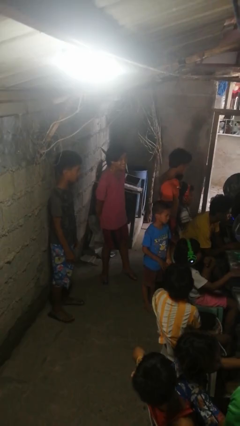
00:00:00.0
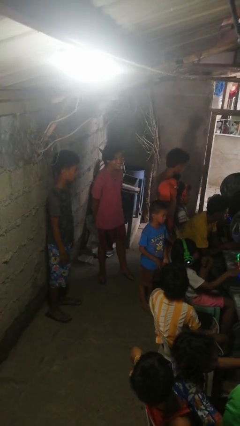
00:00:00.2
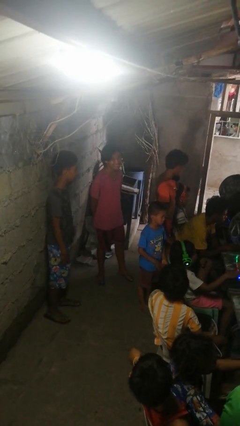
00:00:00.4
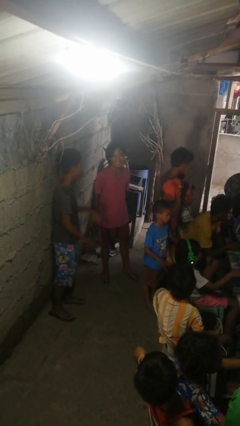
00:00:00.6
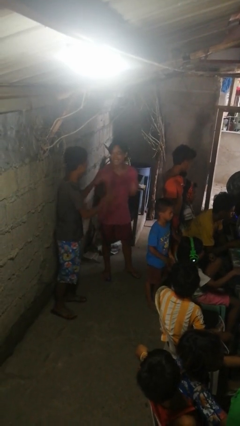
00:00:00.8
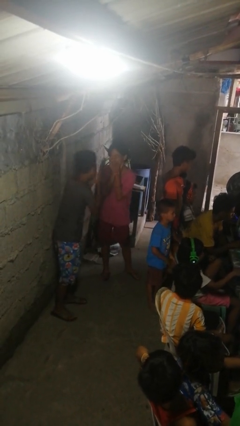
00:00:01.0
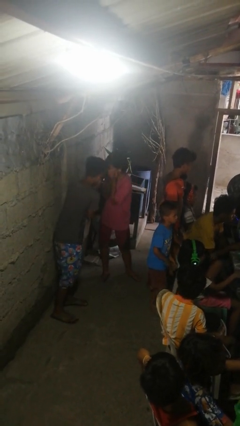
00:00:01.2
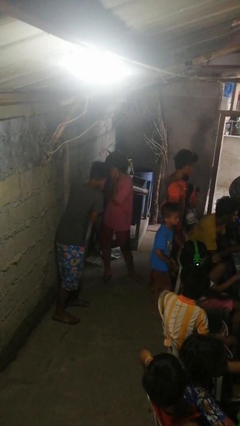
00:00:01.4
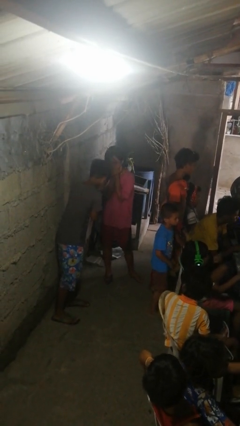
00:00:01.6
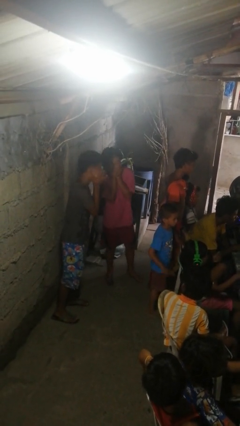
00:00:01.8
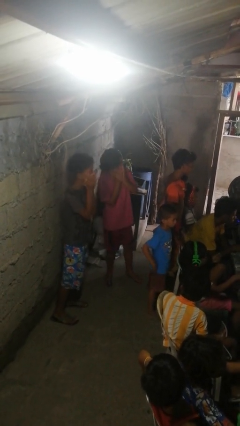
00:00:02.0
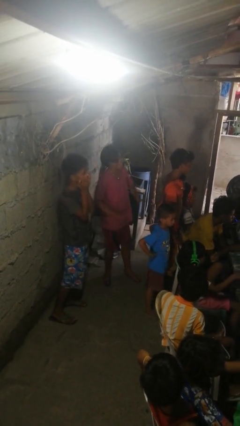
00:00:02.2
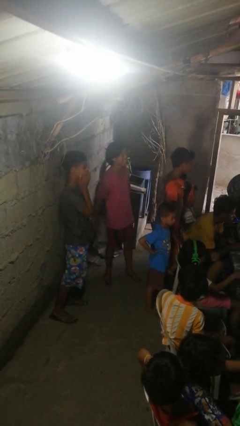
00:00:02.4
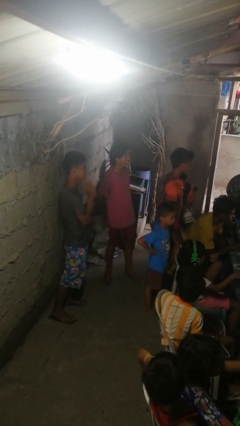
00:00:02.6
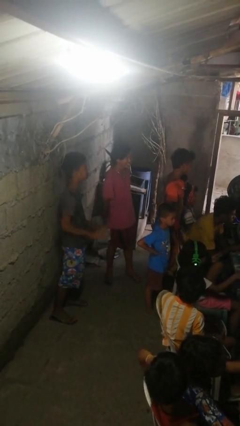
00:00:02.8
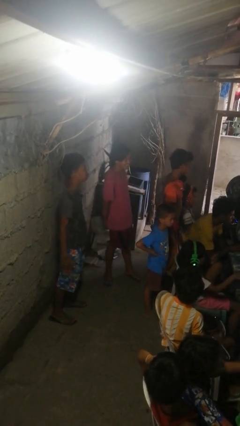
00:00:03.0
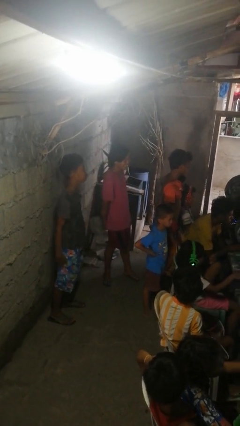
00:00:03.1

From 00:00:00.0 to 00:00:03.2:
person laughs with person

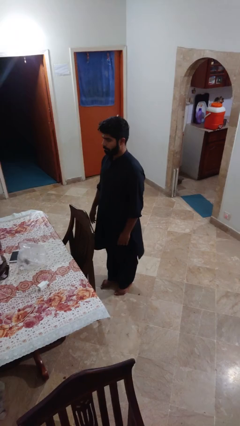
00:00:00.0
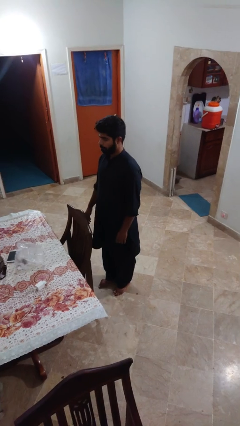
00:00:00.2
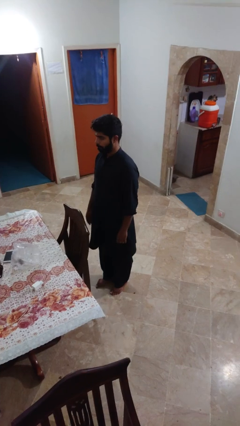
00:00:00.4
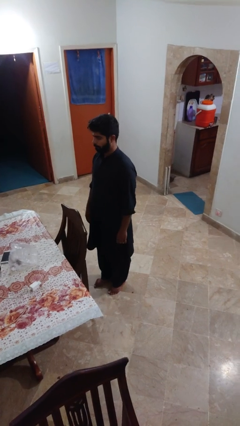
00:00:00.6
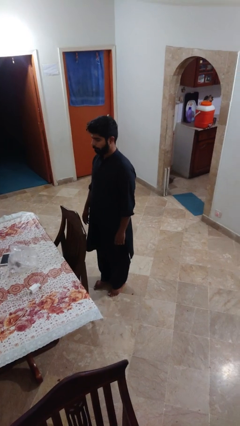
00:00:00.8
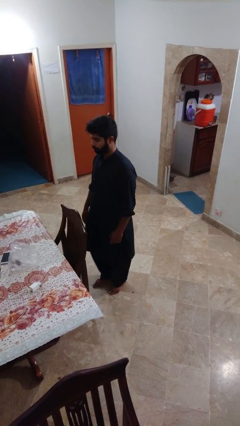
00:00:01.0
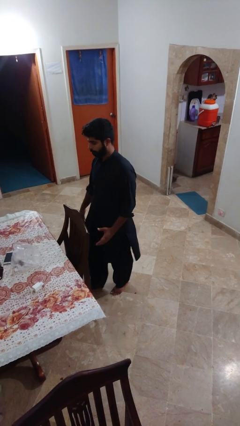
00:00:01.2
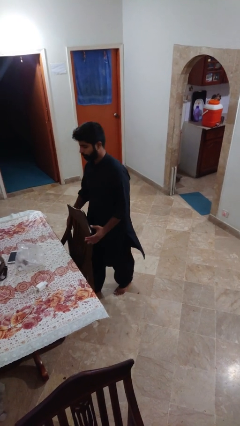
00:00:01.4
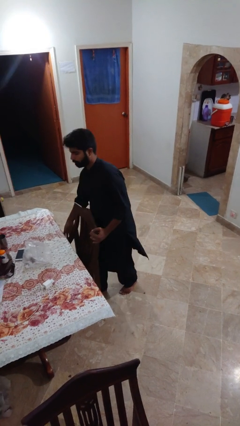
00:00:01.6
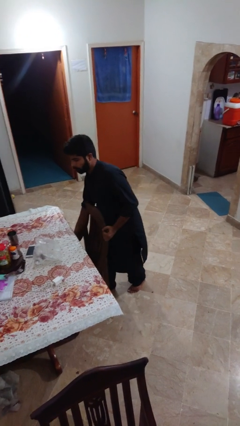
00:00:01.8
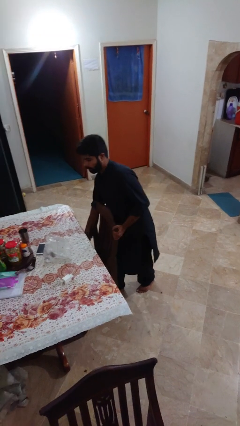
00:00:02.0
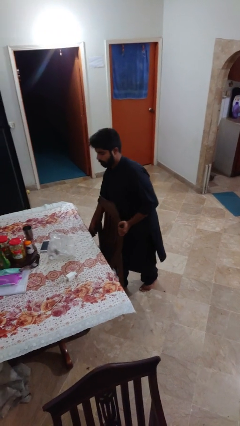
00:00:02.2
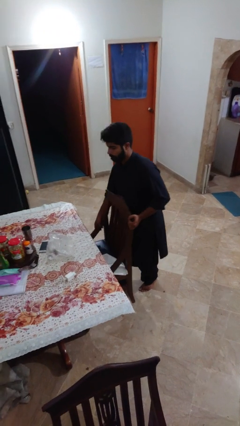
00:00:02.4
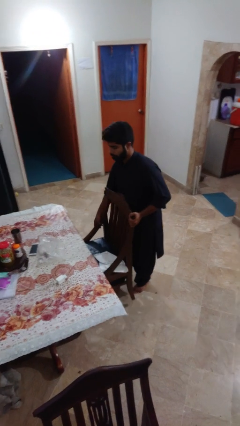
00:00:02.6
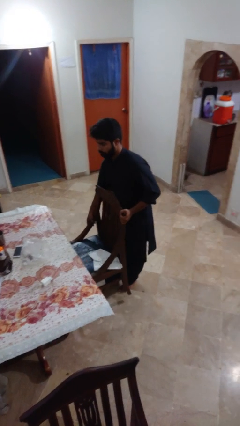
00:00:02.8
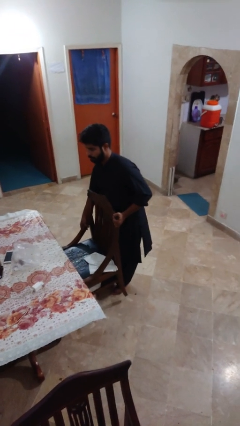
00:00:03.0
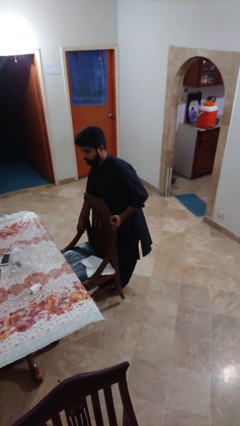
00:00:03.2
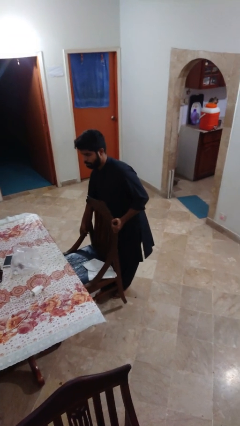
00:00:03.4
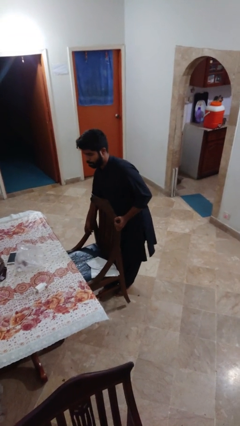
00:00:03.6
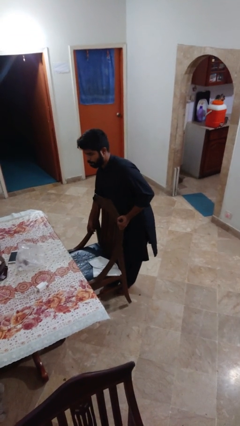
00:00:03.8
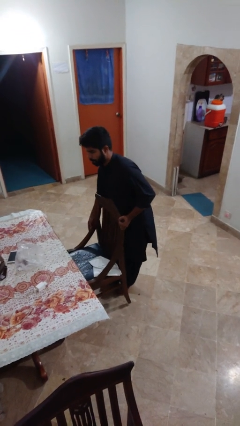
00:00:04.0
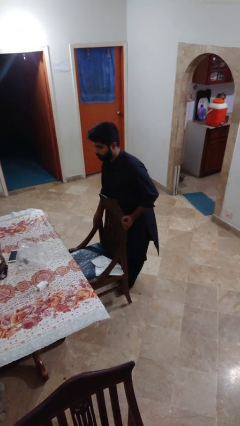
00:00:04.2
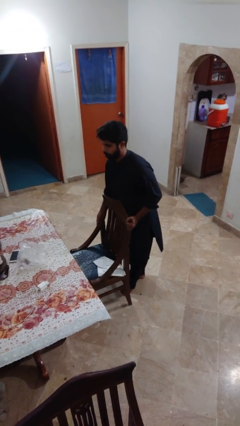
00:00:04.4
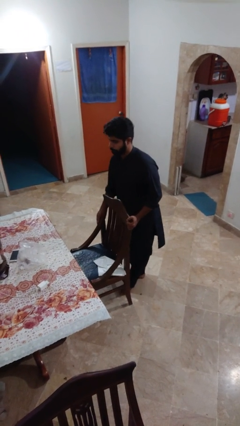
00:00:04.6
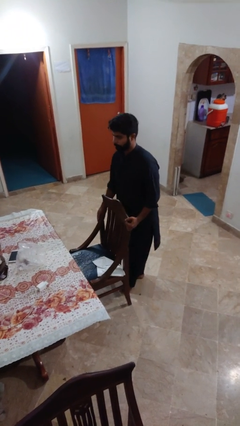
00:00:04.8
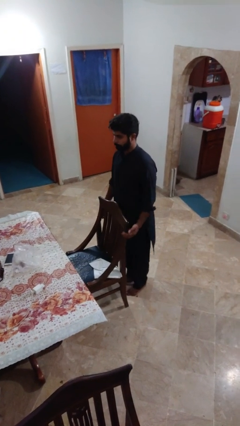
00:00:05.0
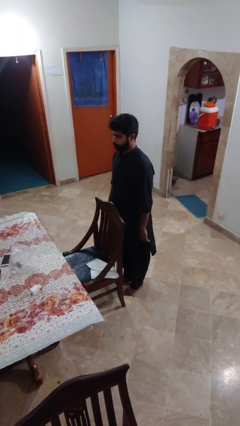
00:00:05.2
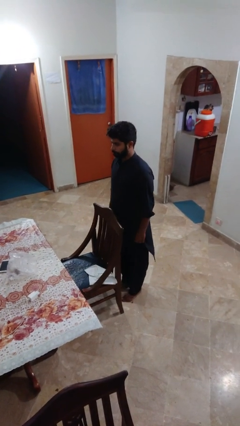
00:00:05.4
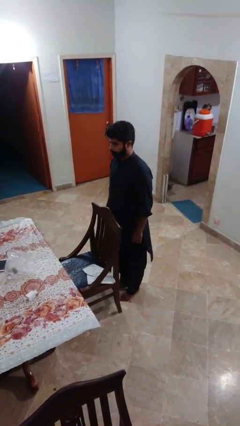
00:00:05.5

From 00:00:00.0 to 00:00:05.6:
person pulls out chair

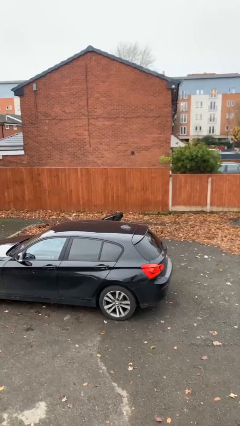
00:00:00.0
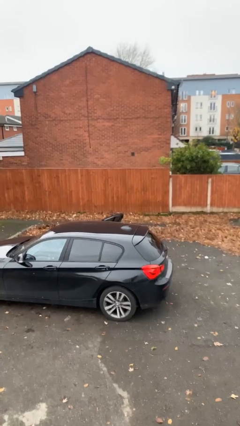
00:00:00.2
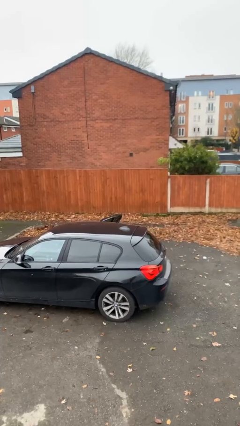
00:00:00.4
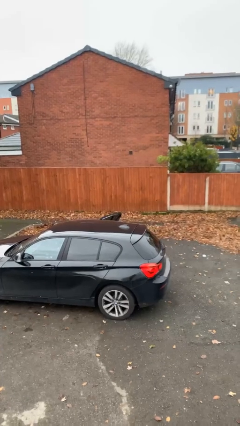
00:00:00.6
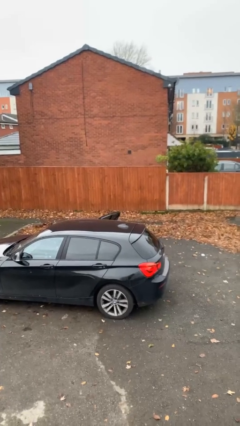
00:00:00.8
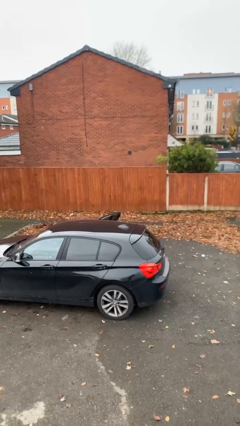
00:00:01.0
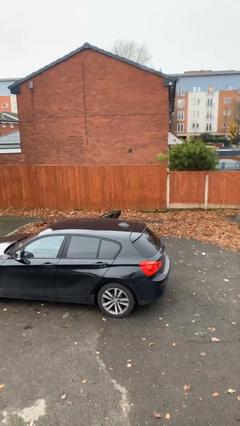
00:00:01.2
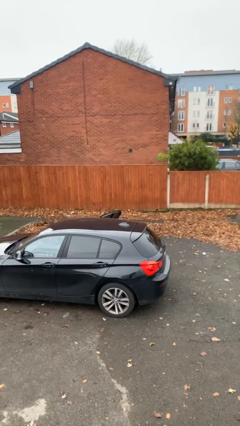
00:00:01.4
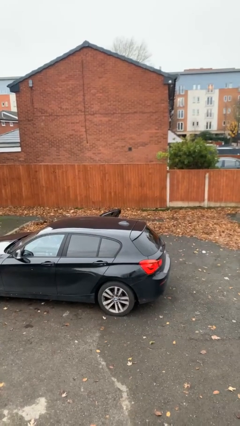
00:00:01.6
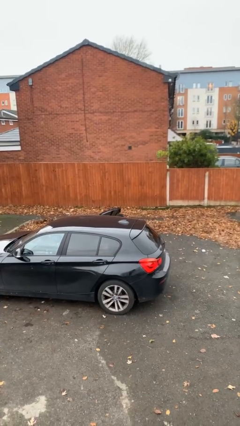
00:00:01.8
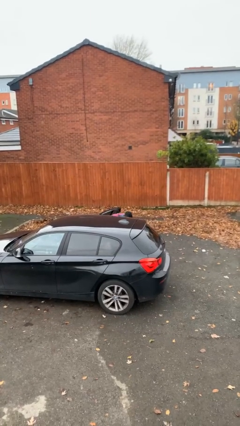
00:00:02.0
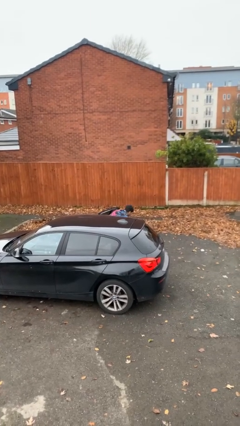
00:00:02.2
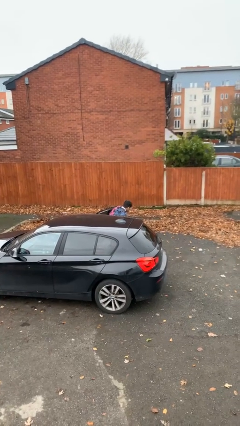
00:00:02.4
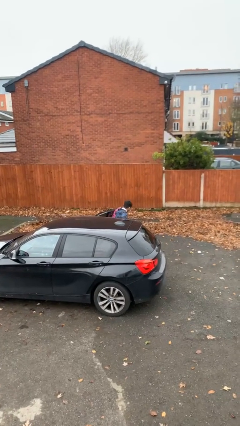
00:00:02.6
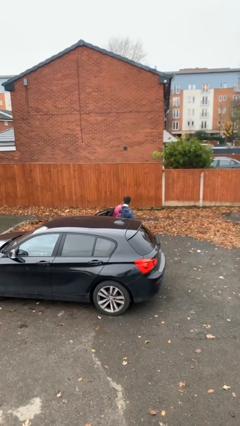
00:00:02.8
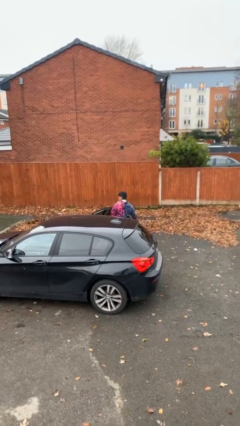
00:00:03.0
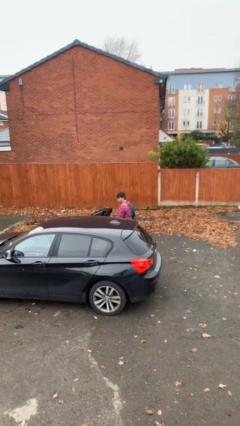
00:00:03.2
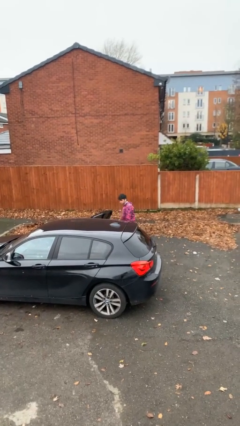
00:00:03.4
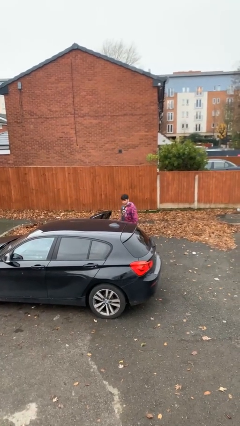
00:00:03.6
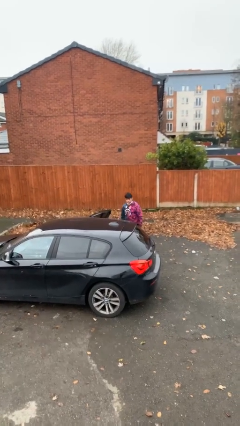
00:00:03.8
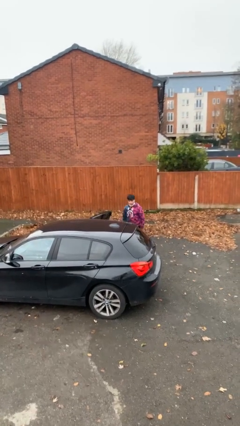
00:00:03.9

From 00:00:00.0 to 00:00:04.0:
person exits car

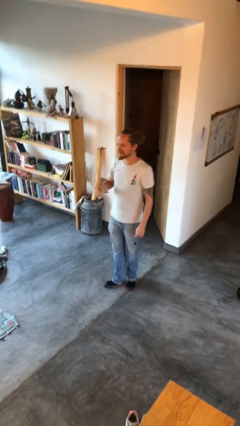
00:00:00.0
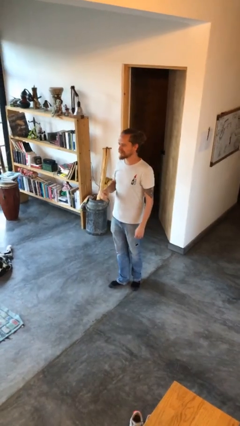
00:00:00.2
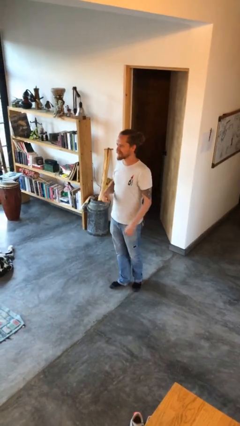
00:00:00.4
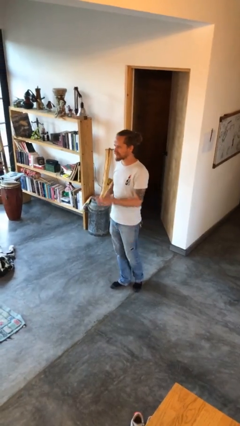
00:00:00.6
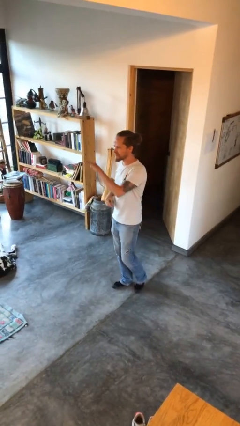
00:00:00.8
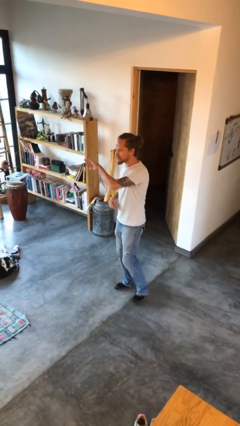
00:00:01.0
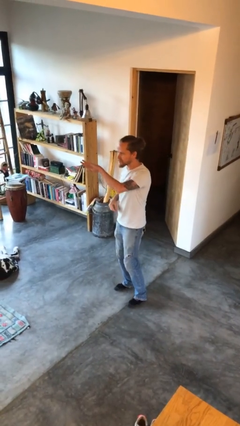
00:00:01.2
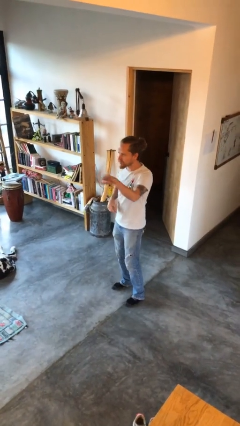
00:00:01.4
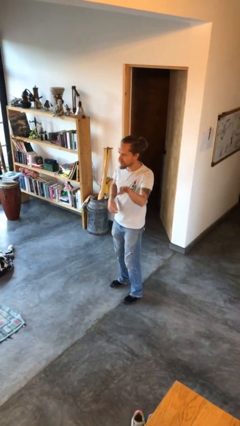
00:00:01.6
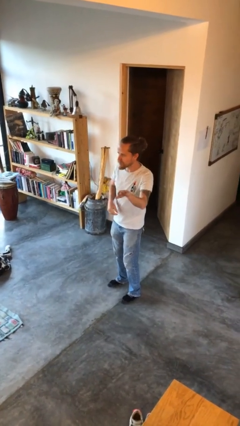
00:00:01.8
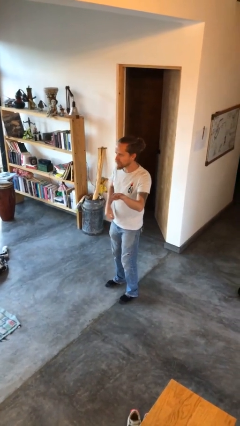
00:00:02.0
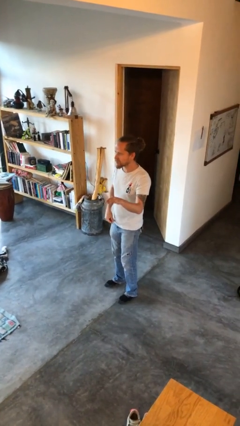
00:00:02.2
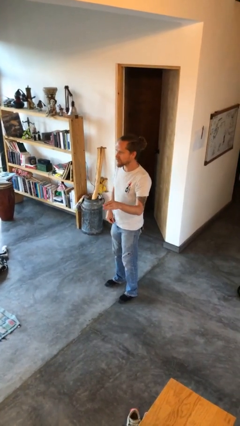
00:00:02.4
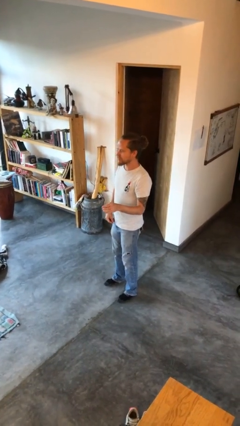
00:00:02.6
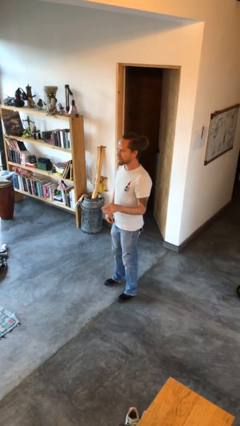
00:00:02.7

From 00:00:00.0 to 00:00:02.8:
person gestures swipe left

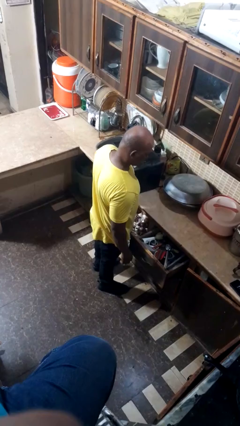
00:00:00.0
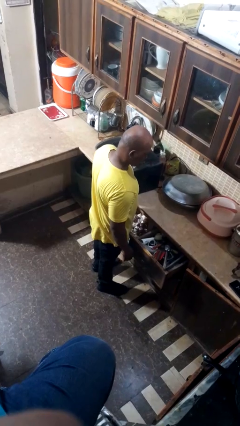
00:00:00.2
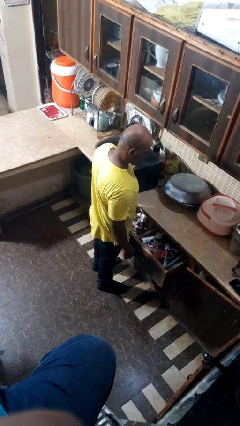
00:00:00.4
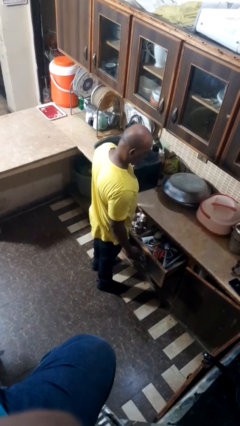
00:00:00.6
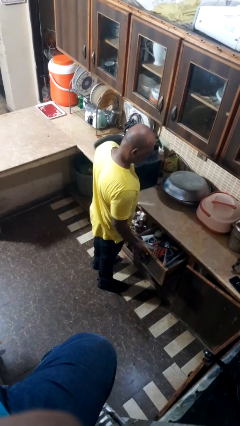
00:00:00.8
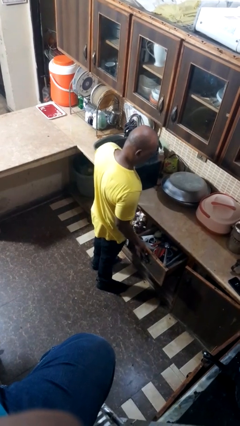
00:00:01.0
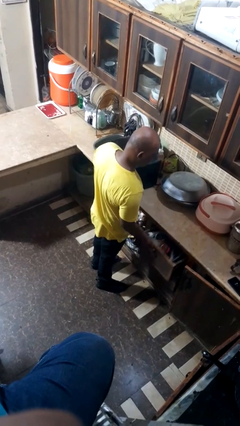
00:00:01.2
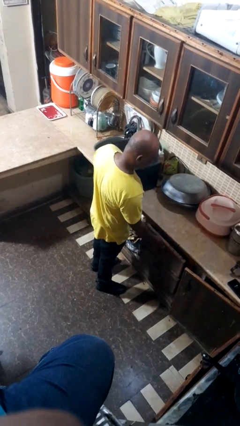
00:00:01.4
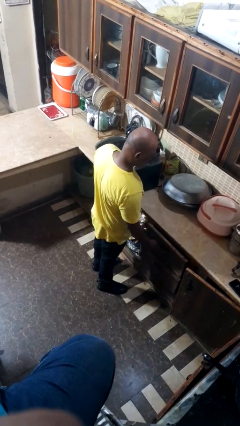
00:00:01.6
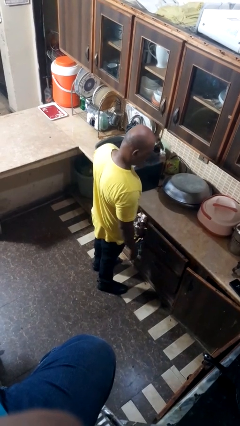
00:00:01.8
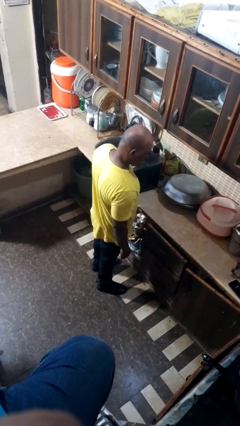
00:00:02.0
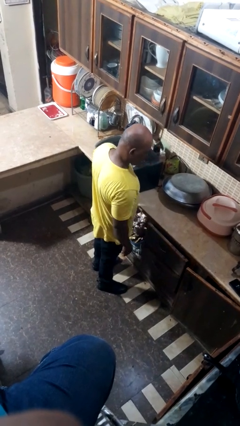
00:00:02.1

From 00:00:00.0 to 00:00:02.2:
person closes dresser drawer
